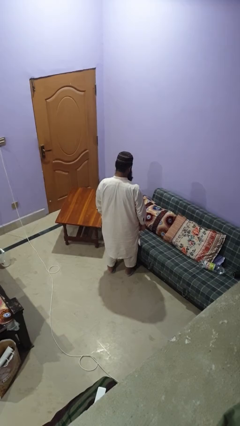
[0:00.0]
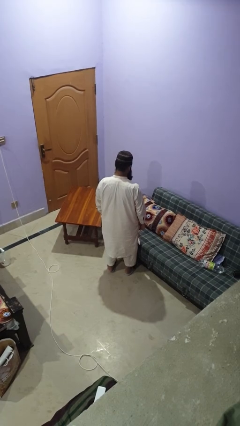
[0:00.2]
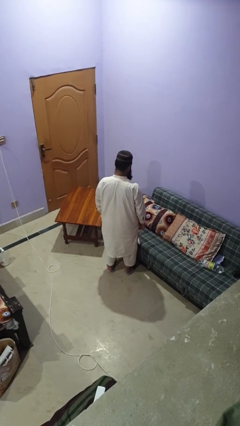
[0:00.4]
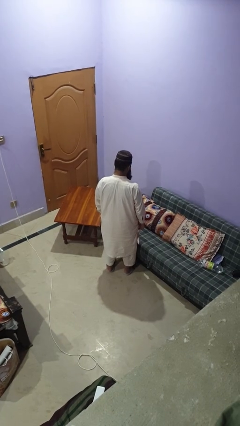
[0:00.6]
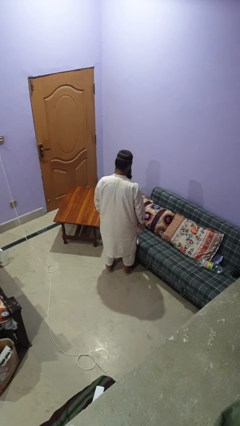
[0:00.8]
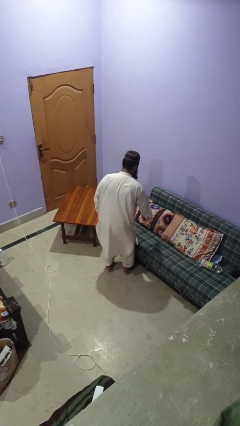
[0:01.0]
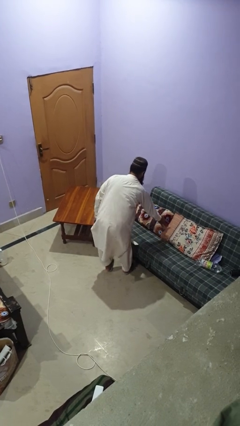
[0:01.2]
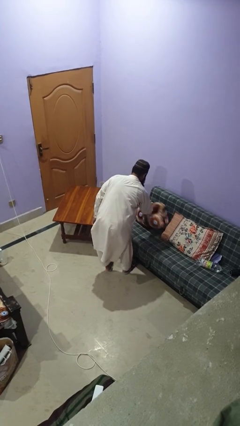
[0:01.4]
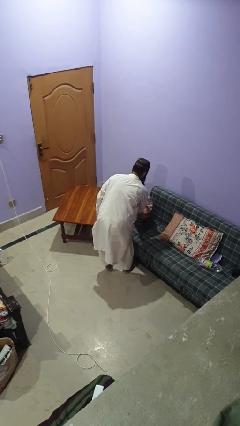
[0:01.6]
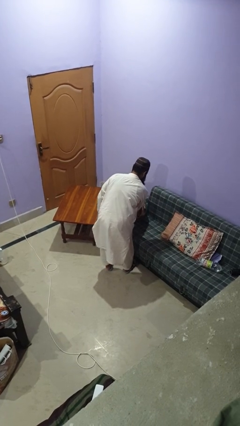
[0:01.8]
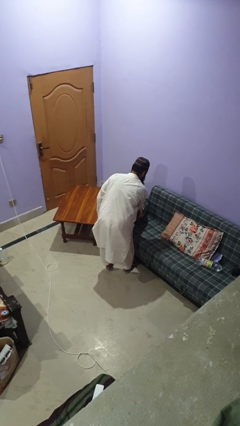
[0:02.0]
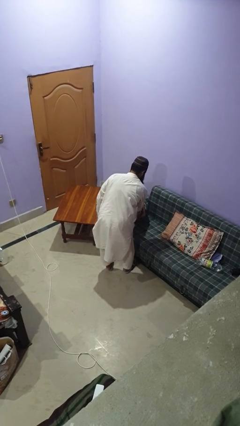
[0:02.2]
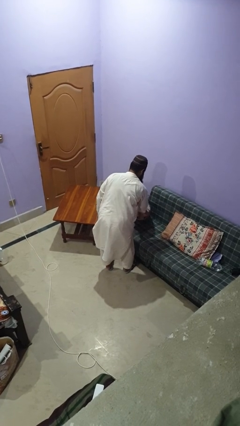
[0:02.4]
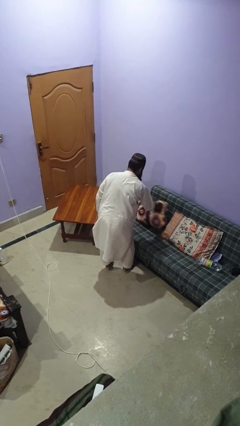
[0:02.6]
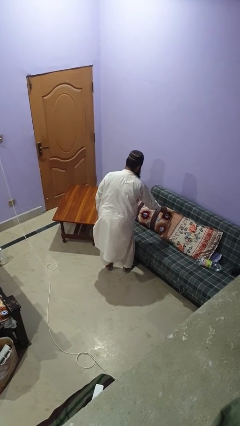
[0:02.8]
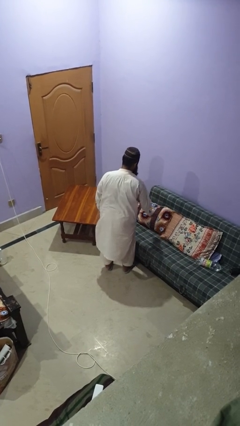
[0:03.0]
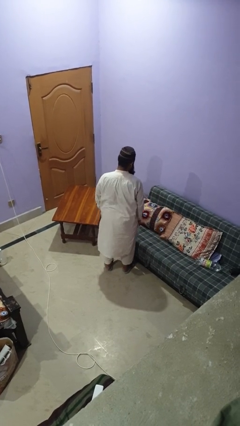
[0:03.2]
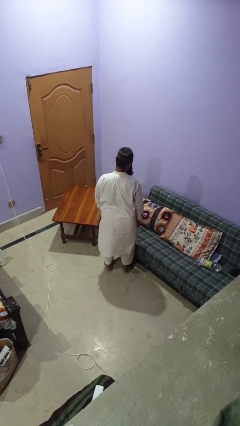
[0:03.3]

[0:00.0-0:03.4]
person searches in couch

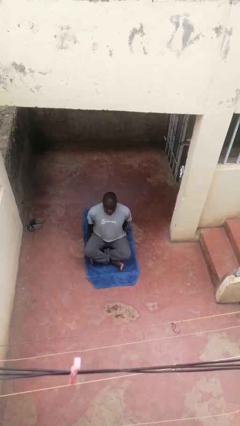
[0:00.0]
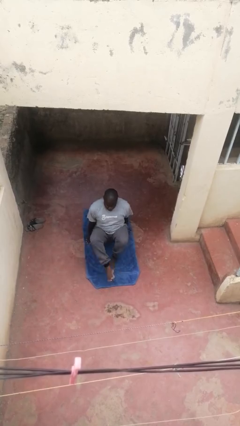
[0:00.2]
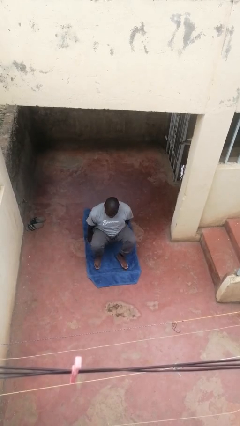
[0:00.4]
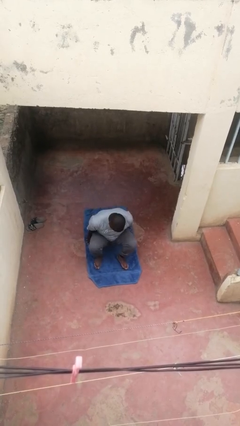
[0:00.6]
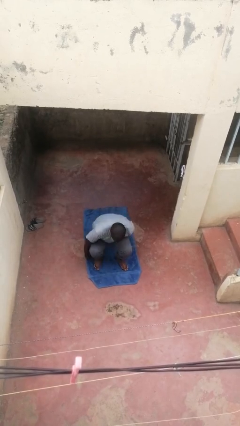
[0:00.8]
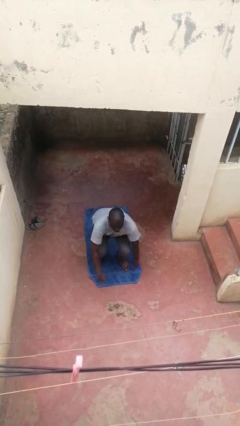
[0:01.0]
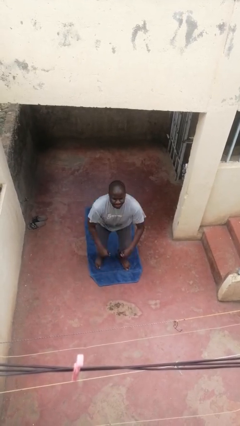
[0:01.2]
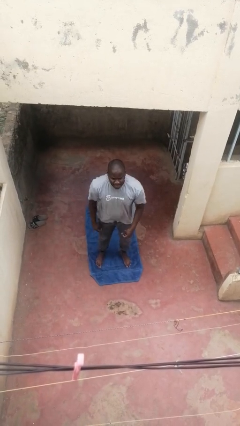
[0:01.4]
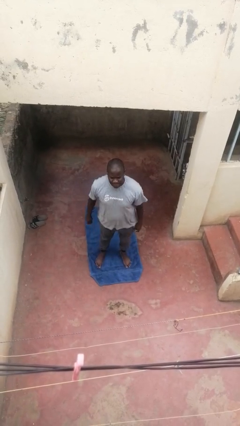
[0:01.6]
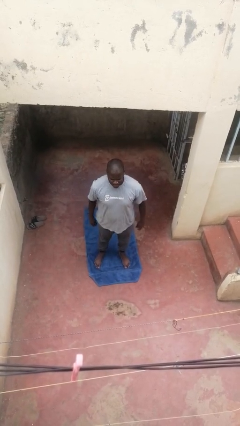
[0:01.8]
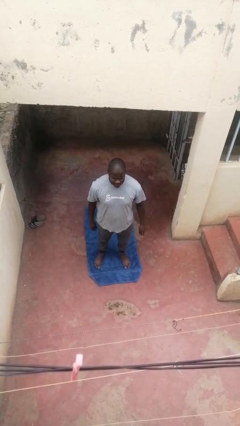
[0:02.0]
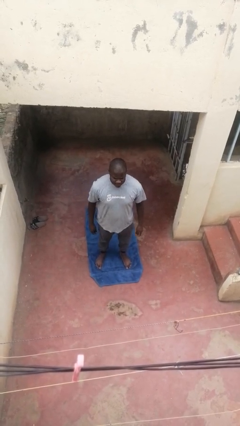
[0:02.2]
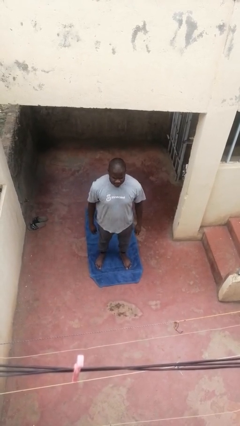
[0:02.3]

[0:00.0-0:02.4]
person stands up from floor

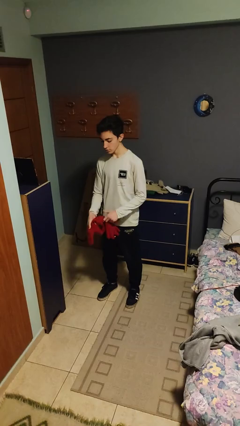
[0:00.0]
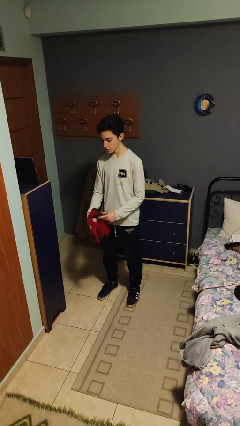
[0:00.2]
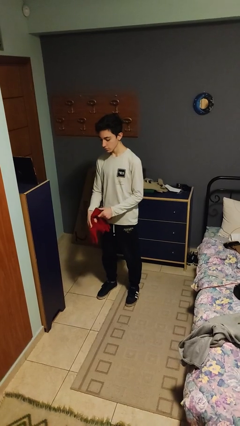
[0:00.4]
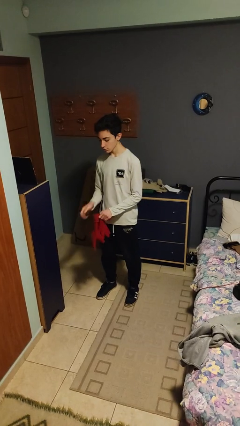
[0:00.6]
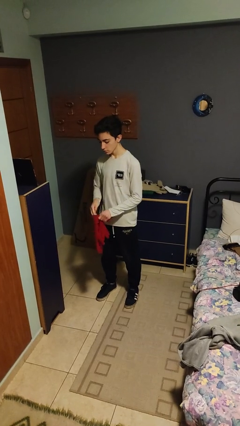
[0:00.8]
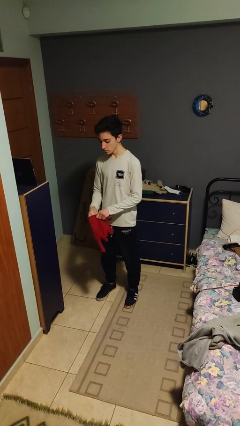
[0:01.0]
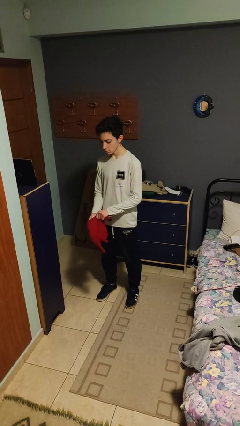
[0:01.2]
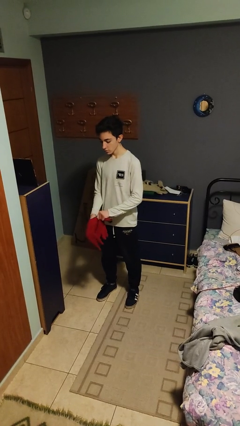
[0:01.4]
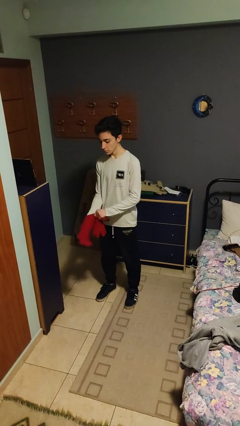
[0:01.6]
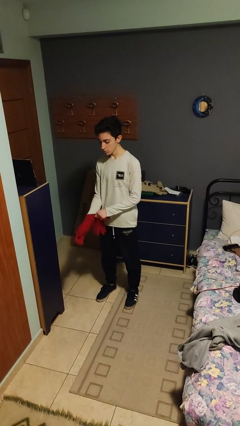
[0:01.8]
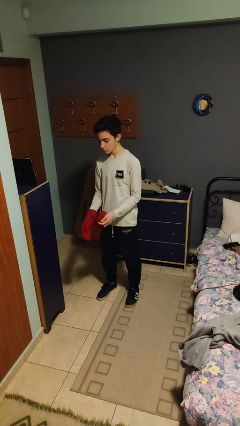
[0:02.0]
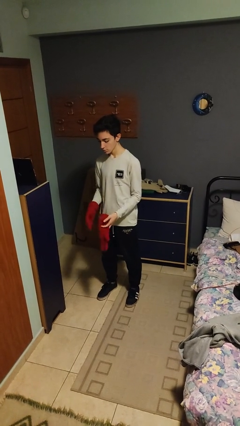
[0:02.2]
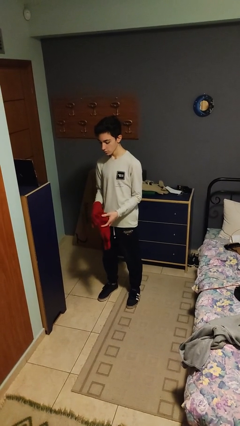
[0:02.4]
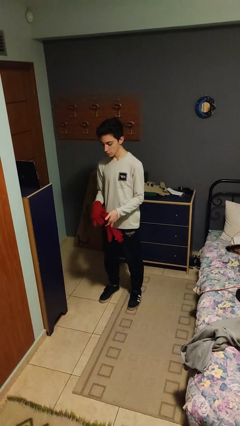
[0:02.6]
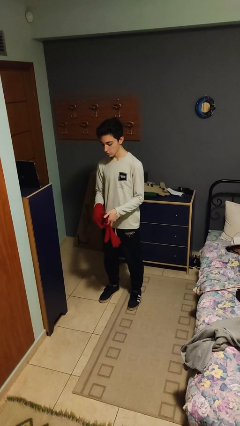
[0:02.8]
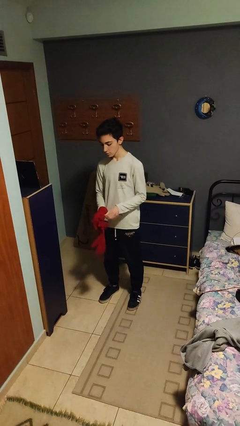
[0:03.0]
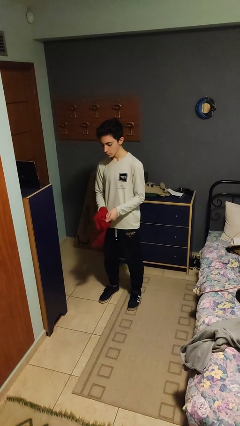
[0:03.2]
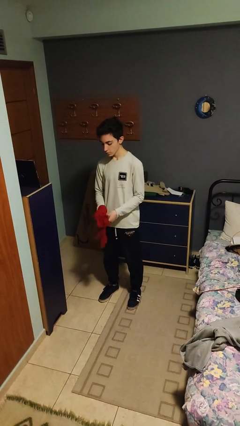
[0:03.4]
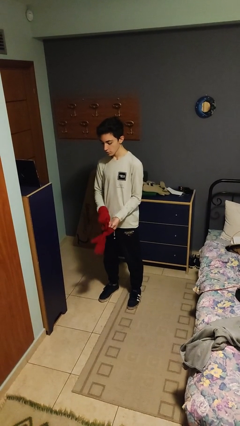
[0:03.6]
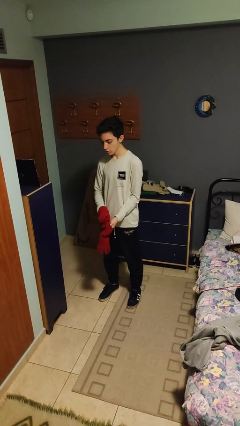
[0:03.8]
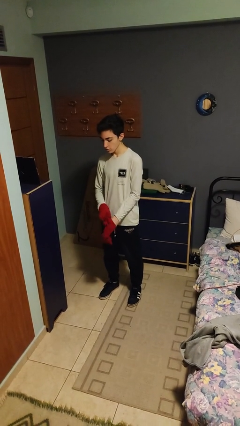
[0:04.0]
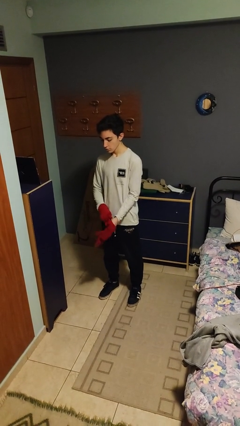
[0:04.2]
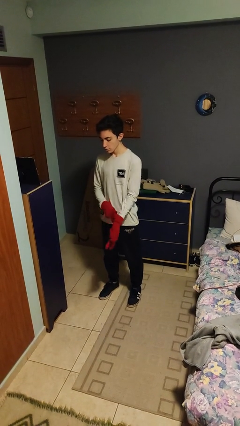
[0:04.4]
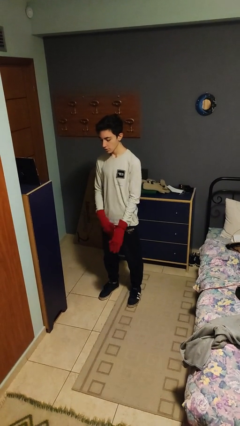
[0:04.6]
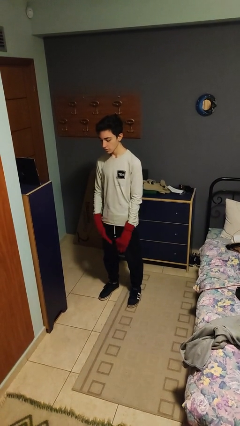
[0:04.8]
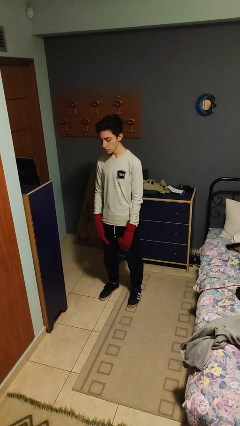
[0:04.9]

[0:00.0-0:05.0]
person puts on gloves

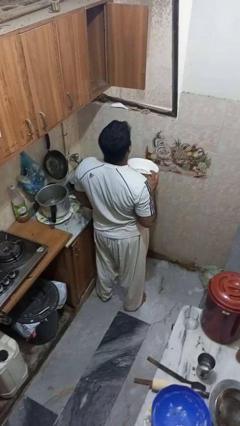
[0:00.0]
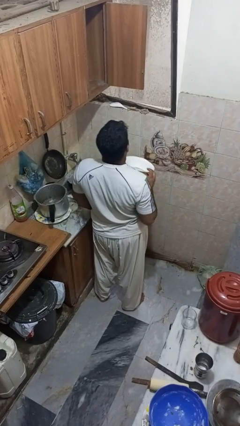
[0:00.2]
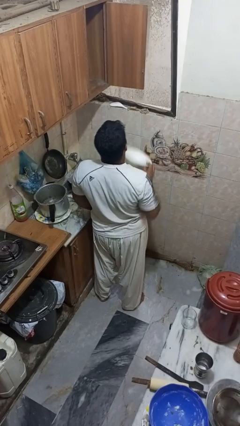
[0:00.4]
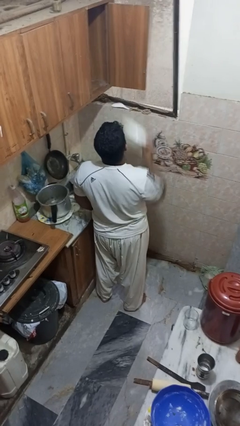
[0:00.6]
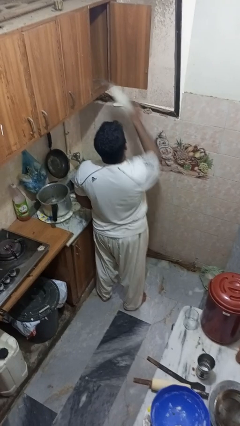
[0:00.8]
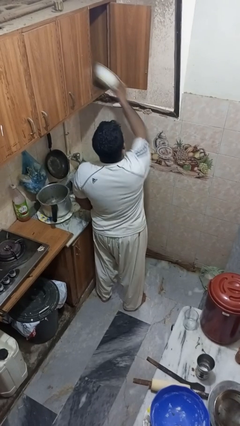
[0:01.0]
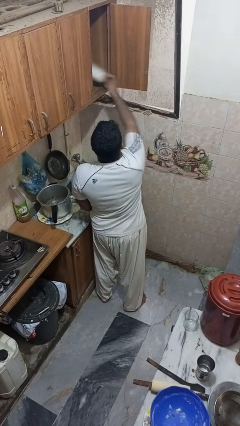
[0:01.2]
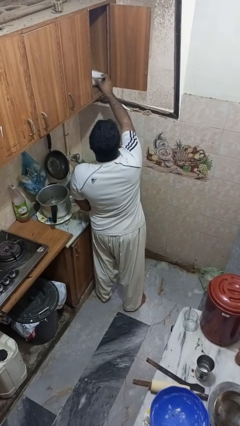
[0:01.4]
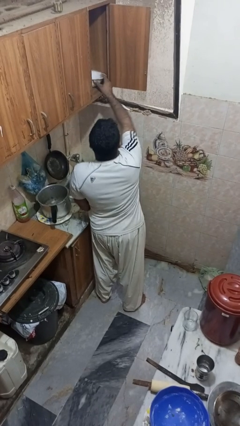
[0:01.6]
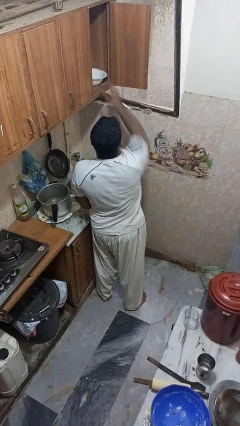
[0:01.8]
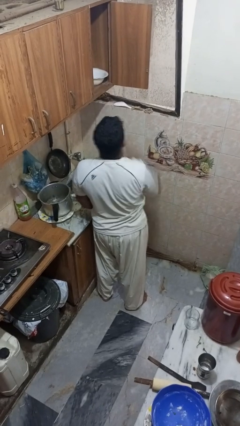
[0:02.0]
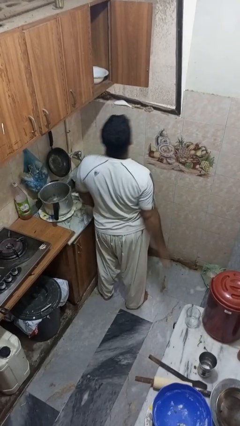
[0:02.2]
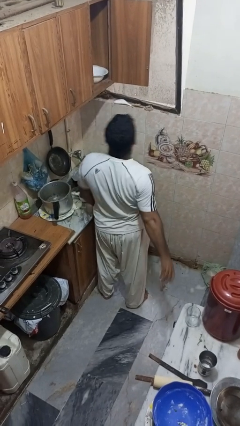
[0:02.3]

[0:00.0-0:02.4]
person puts object in cabinet

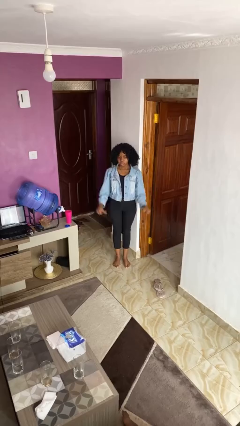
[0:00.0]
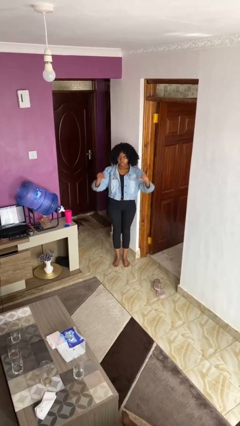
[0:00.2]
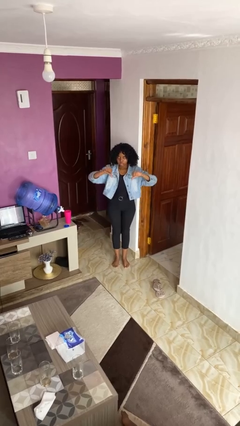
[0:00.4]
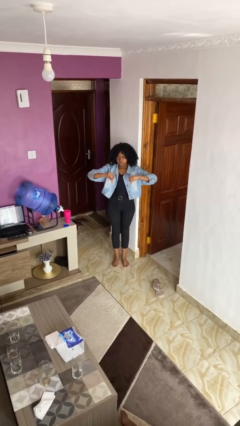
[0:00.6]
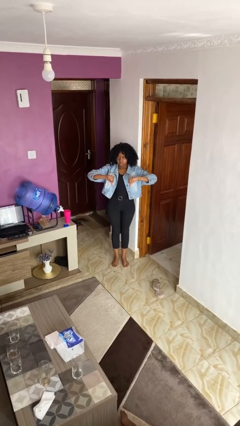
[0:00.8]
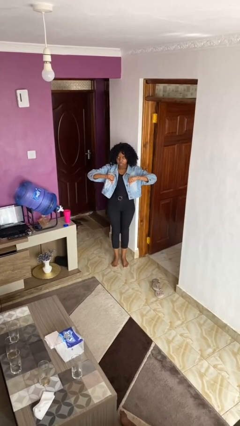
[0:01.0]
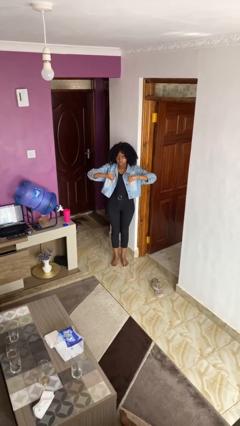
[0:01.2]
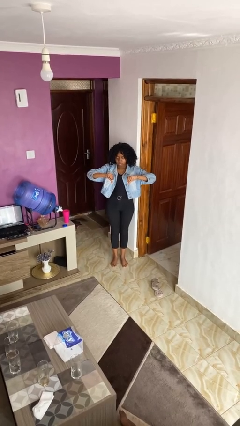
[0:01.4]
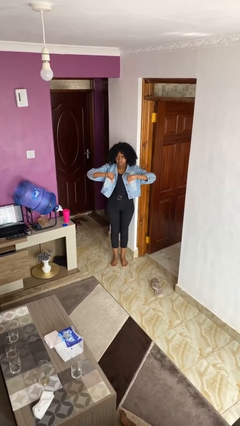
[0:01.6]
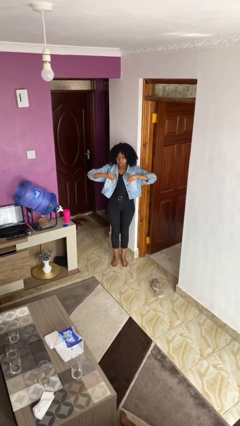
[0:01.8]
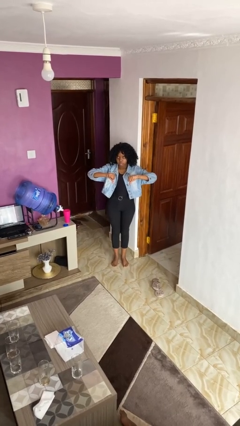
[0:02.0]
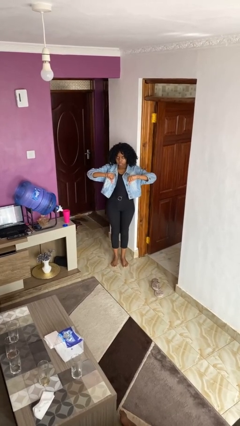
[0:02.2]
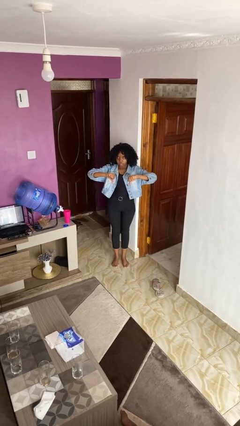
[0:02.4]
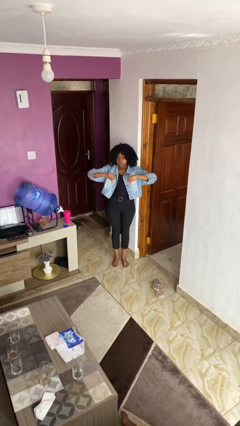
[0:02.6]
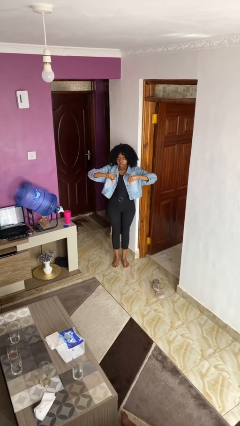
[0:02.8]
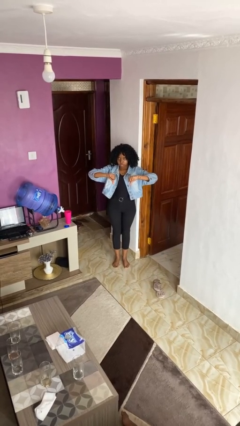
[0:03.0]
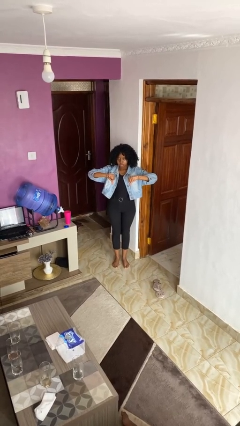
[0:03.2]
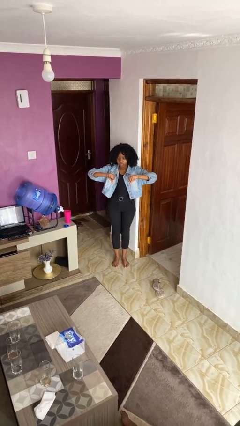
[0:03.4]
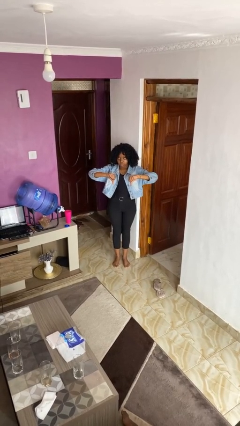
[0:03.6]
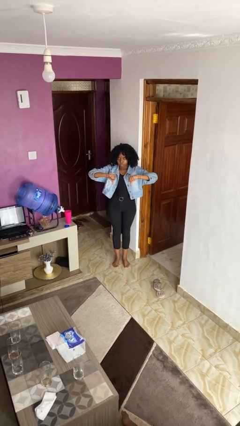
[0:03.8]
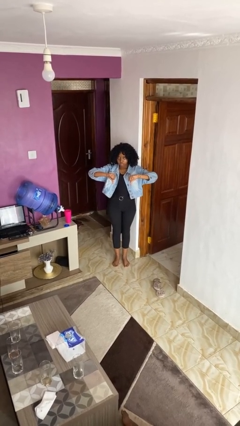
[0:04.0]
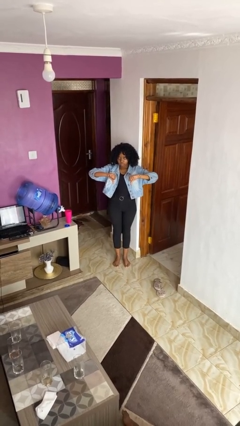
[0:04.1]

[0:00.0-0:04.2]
person gestures thumbs down

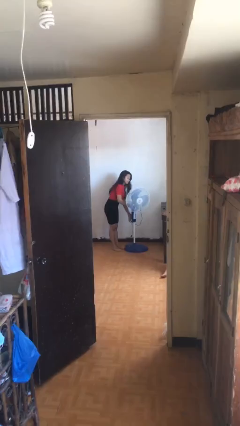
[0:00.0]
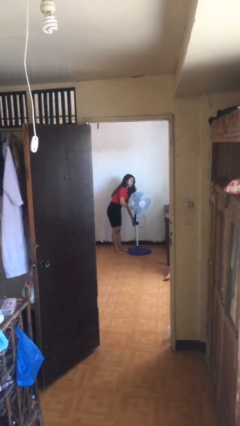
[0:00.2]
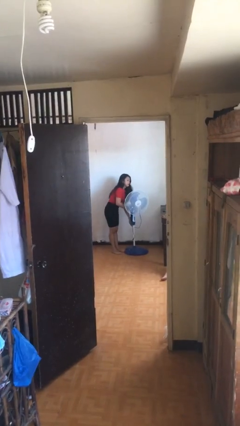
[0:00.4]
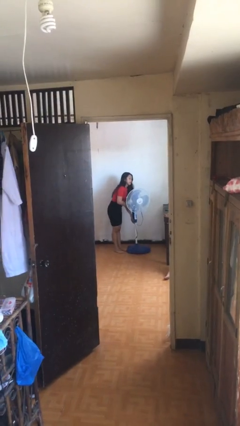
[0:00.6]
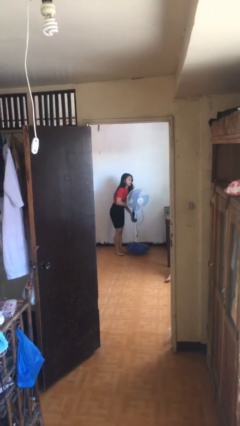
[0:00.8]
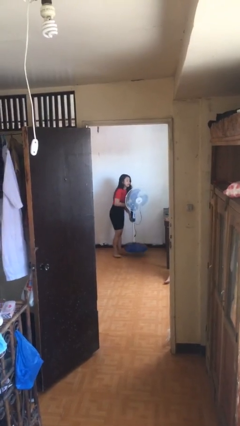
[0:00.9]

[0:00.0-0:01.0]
person picks up object from floor
